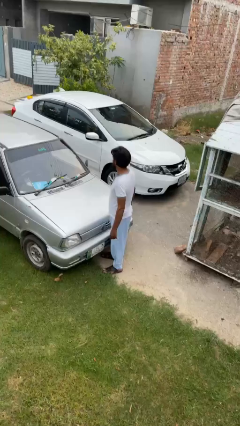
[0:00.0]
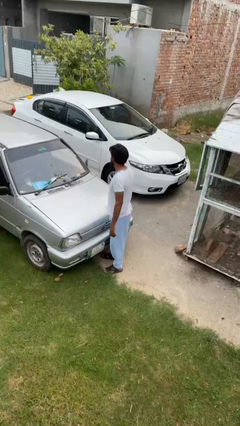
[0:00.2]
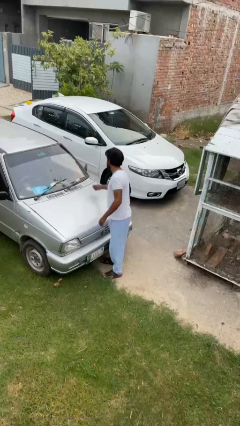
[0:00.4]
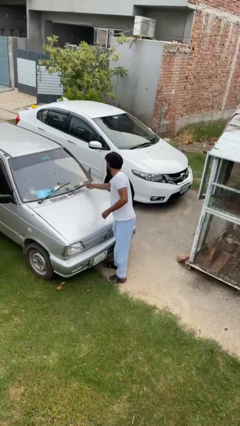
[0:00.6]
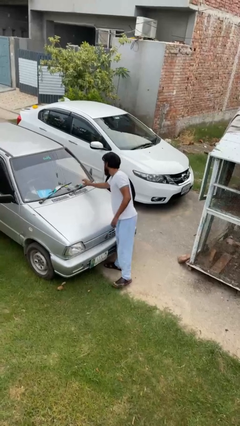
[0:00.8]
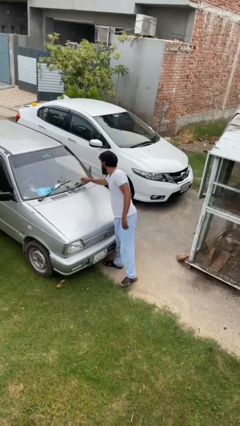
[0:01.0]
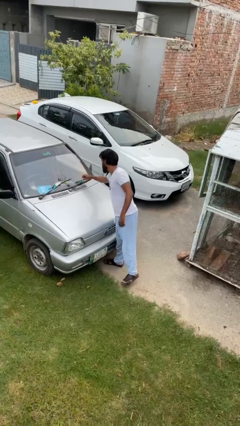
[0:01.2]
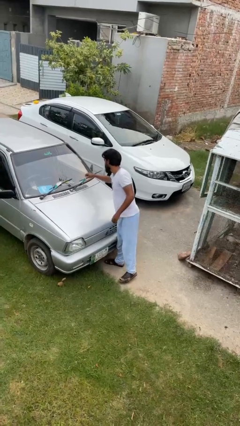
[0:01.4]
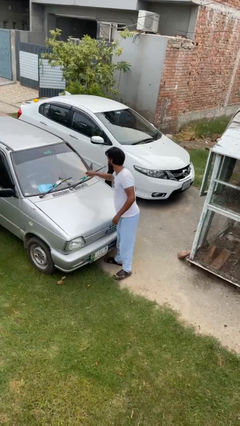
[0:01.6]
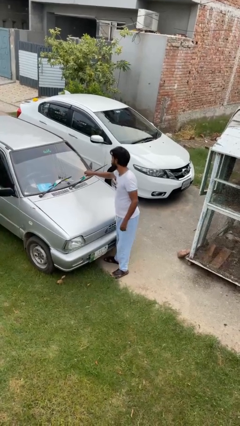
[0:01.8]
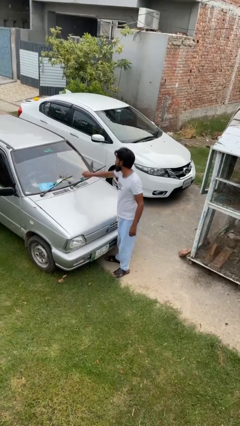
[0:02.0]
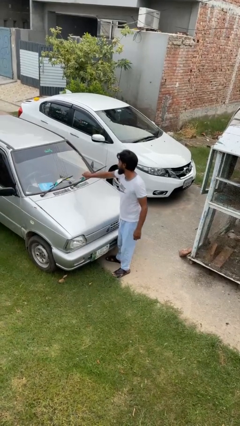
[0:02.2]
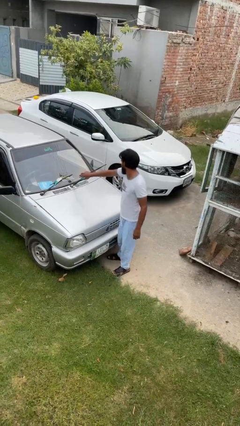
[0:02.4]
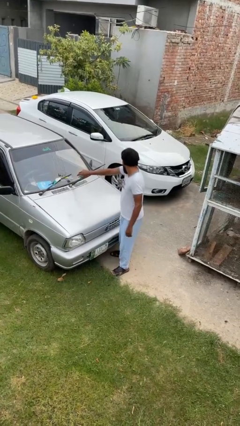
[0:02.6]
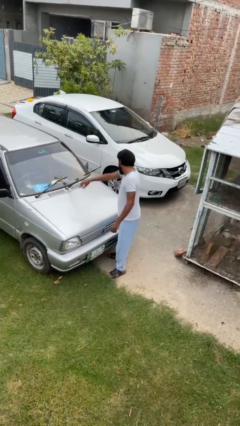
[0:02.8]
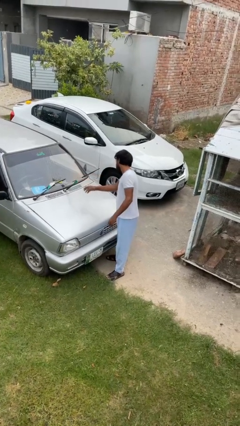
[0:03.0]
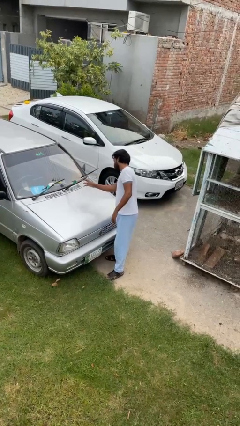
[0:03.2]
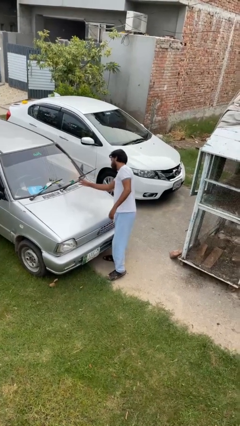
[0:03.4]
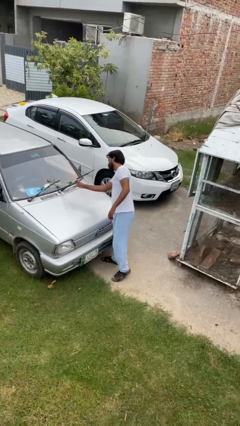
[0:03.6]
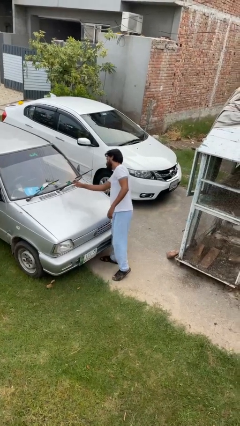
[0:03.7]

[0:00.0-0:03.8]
person flips up car wipers

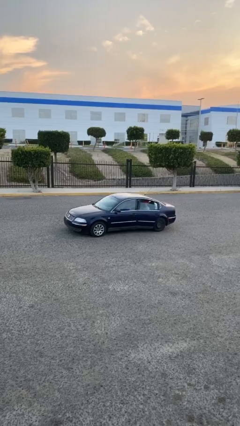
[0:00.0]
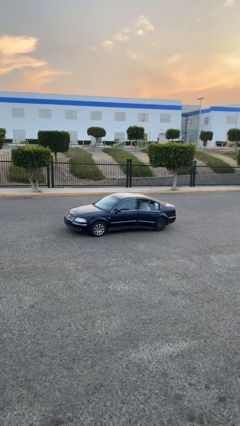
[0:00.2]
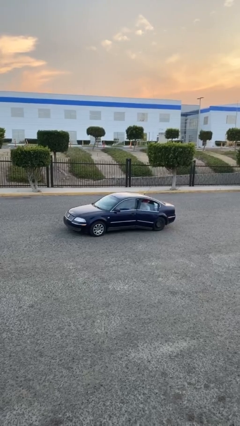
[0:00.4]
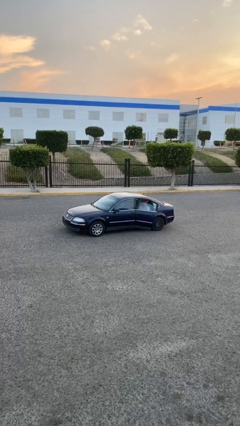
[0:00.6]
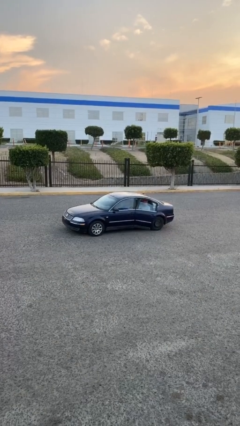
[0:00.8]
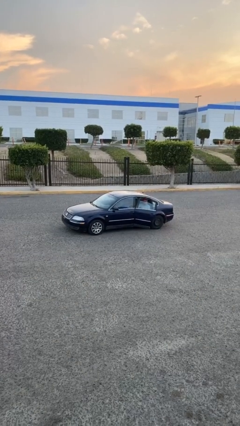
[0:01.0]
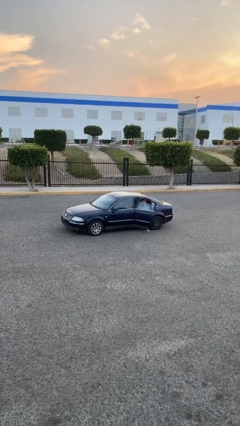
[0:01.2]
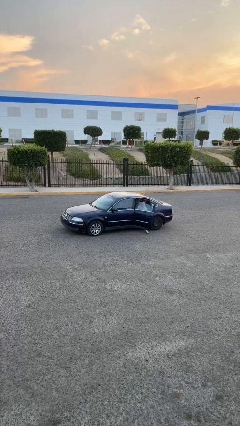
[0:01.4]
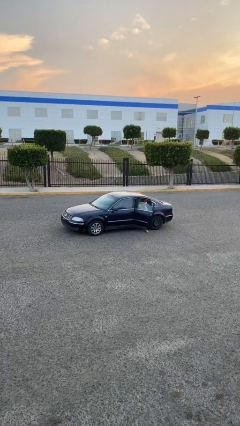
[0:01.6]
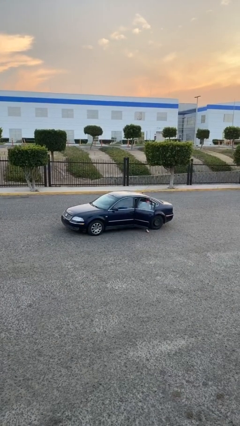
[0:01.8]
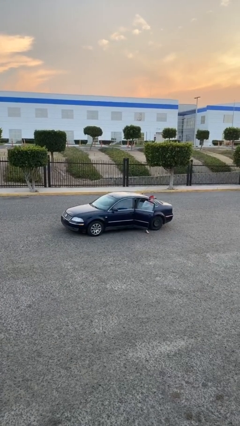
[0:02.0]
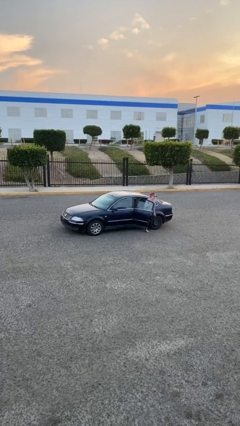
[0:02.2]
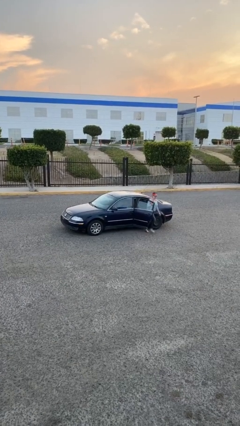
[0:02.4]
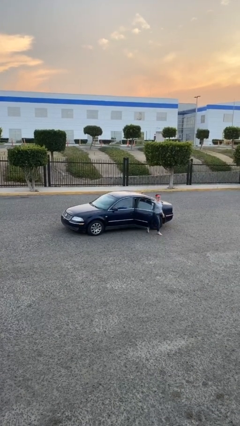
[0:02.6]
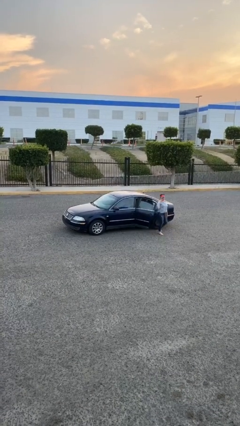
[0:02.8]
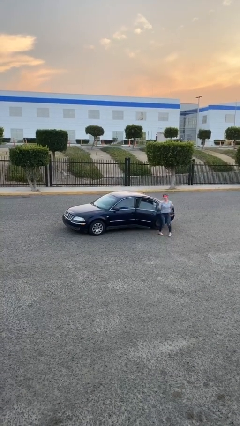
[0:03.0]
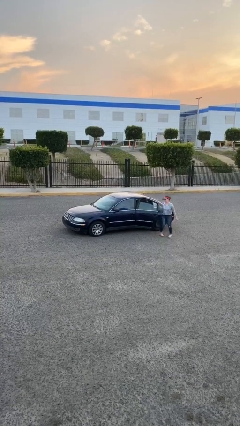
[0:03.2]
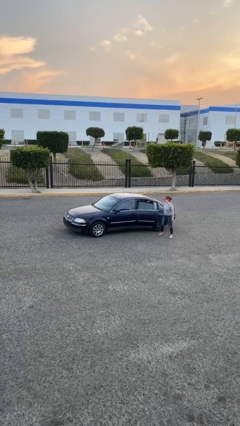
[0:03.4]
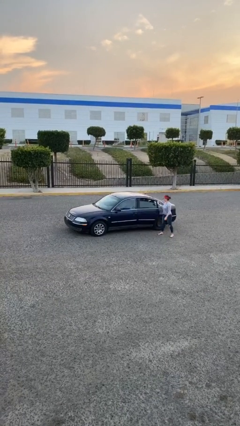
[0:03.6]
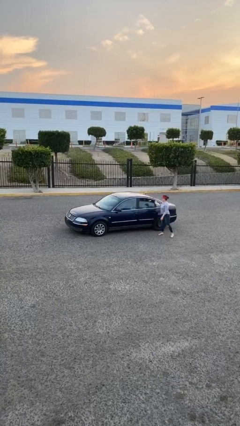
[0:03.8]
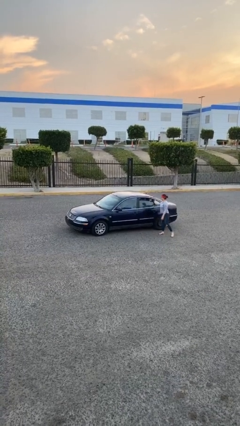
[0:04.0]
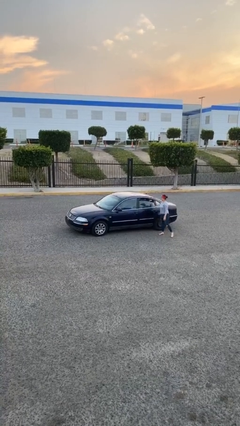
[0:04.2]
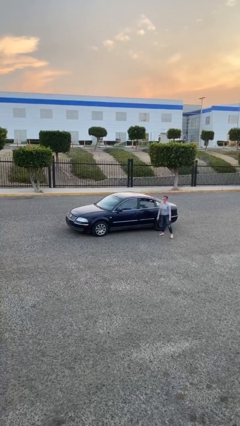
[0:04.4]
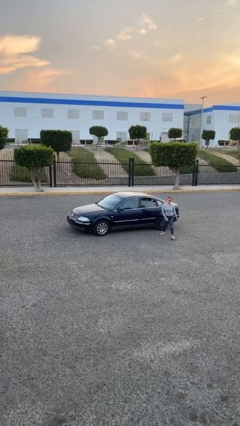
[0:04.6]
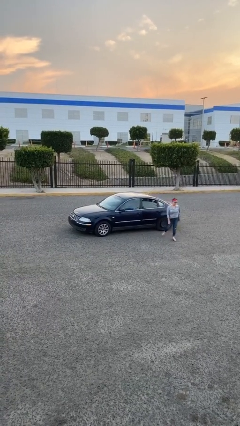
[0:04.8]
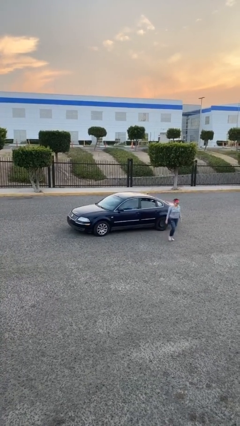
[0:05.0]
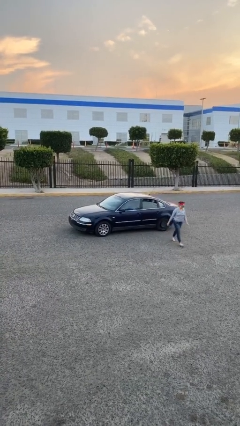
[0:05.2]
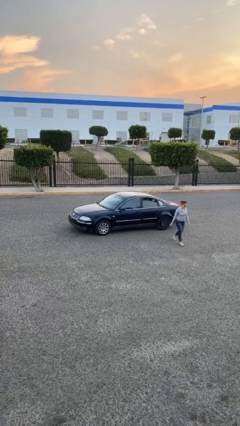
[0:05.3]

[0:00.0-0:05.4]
car drops off person

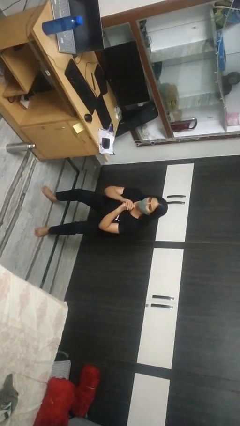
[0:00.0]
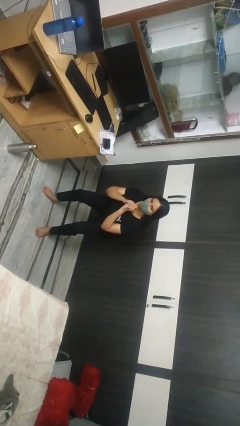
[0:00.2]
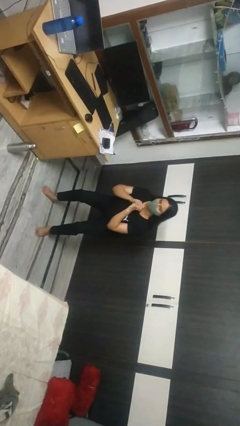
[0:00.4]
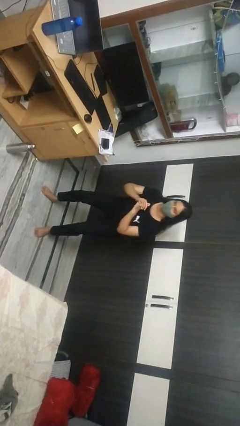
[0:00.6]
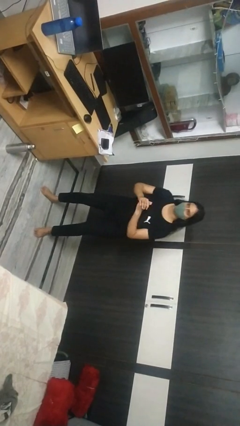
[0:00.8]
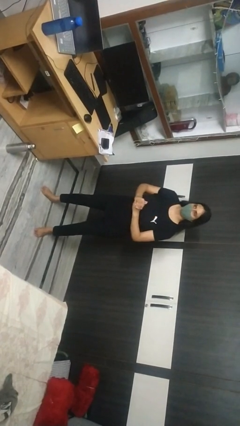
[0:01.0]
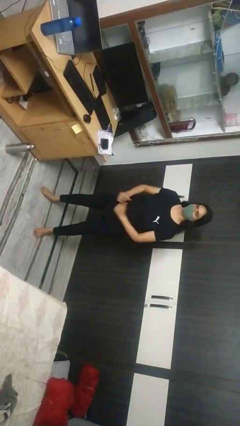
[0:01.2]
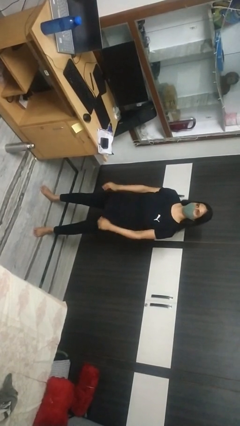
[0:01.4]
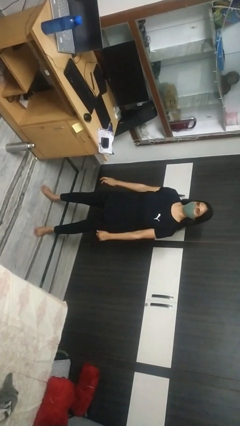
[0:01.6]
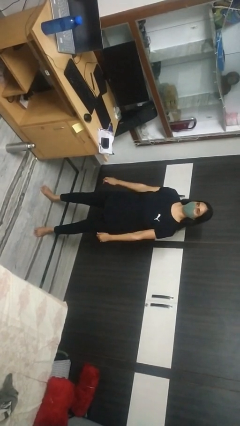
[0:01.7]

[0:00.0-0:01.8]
person stands up

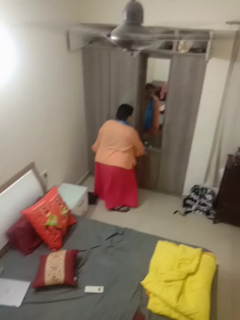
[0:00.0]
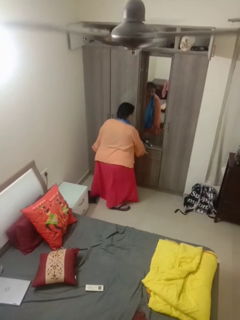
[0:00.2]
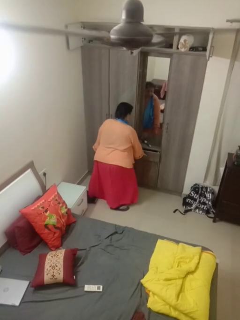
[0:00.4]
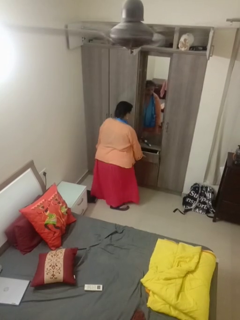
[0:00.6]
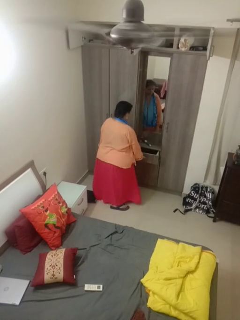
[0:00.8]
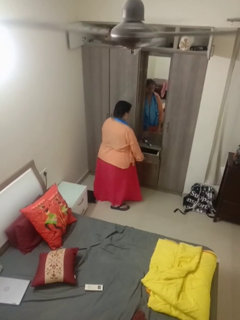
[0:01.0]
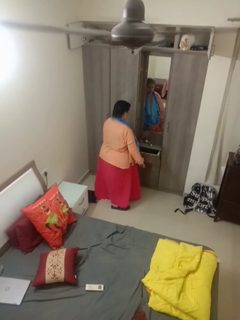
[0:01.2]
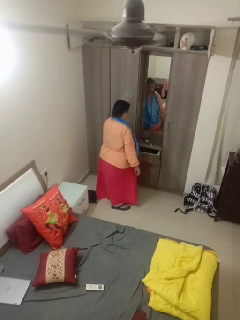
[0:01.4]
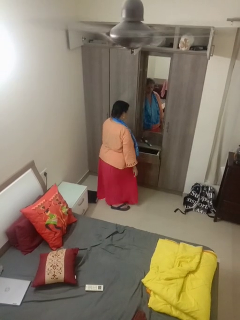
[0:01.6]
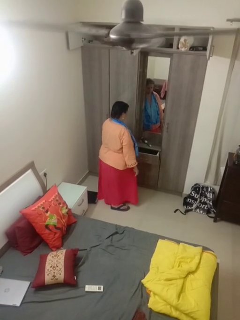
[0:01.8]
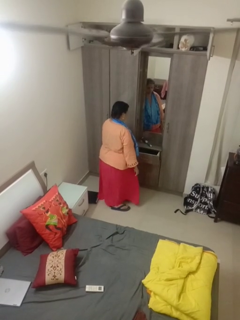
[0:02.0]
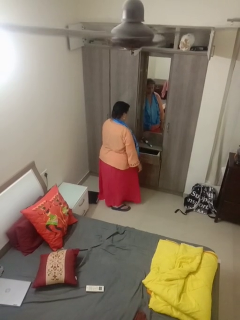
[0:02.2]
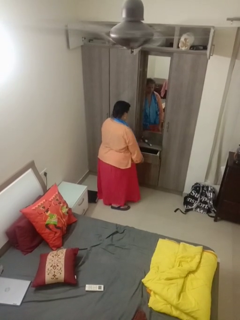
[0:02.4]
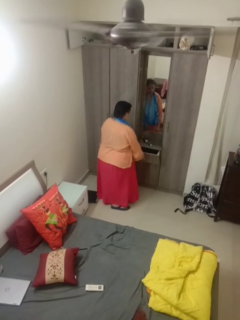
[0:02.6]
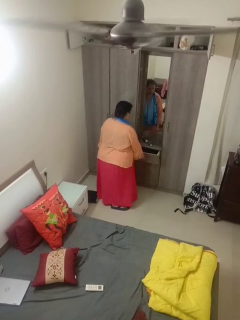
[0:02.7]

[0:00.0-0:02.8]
person opens dresser drawer

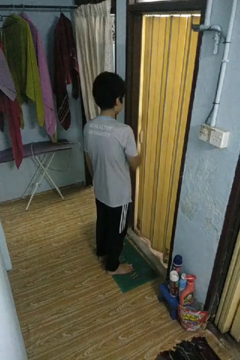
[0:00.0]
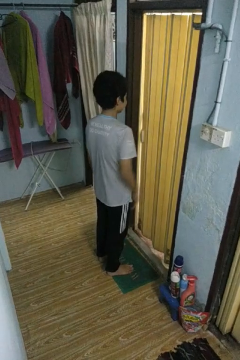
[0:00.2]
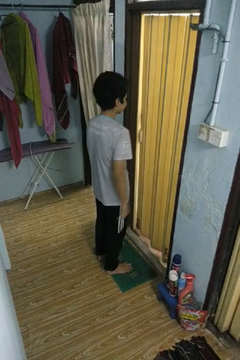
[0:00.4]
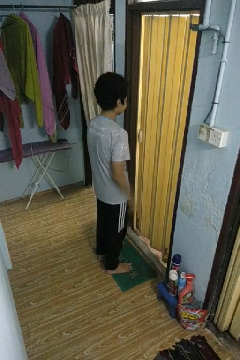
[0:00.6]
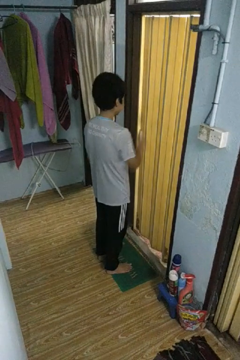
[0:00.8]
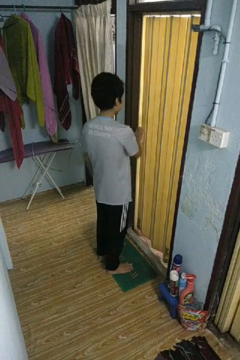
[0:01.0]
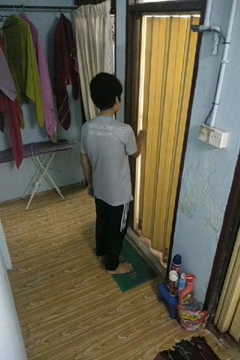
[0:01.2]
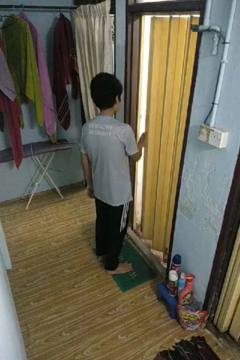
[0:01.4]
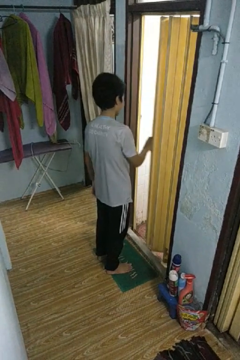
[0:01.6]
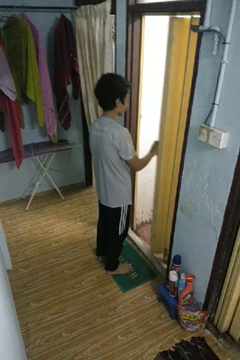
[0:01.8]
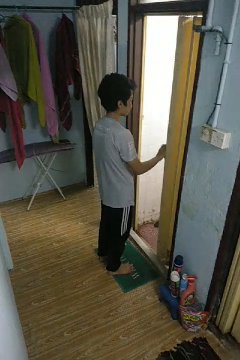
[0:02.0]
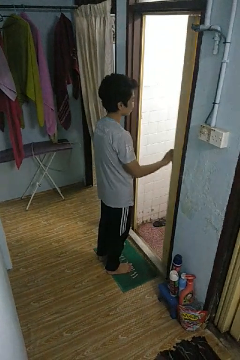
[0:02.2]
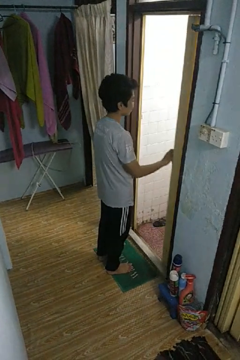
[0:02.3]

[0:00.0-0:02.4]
person opens sliding door

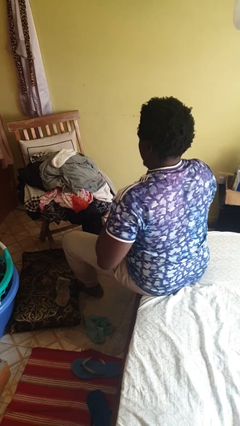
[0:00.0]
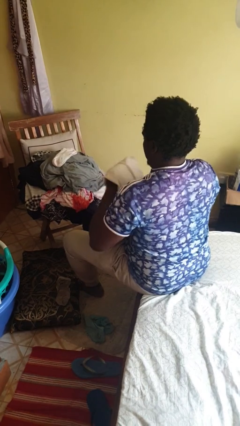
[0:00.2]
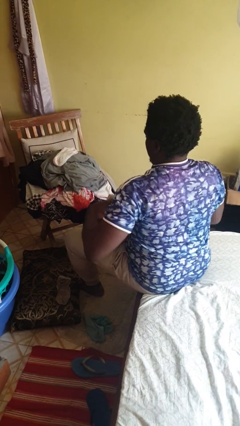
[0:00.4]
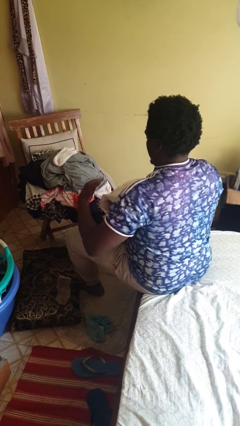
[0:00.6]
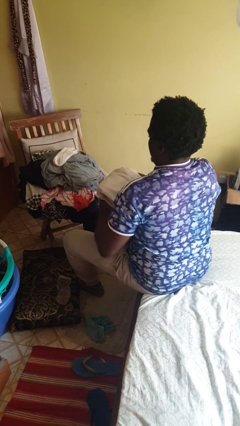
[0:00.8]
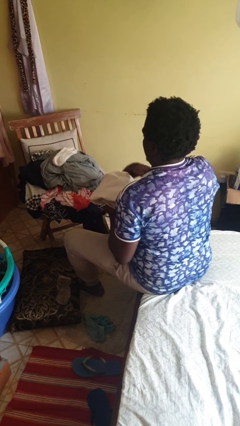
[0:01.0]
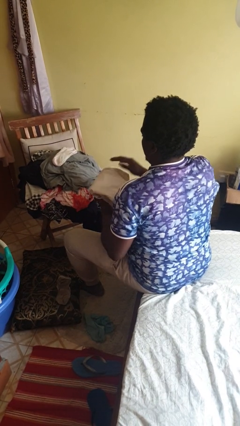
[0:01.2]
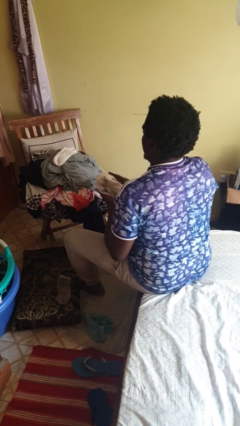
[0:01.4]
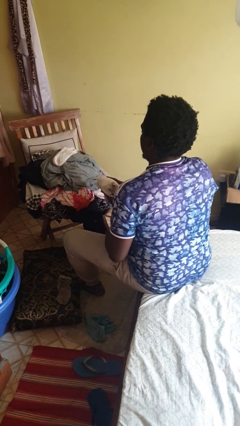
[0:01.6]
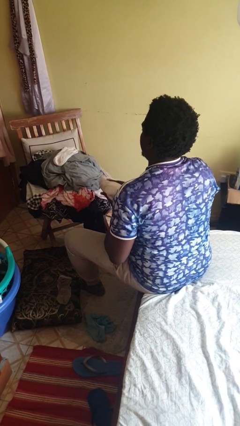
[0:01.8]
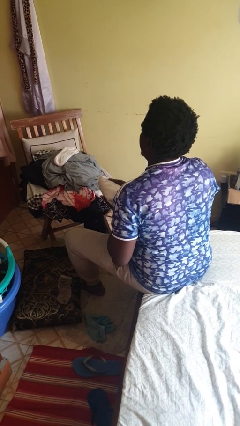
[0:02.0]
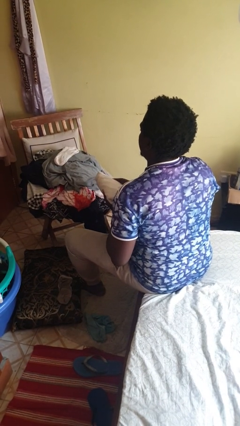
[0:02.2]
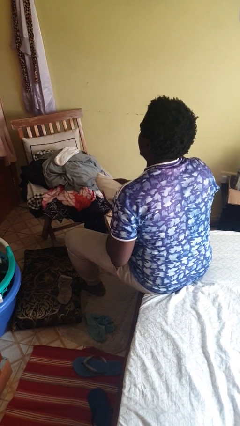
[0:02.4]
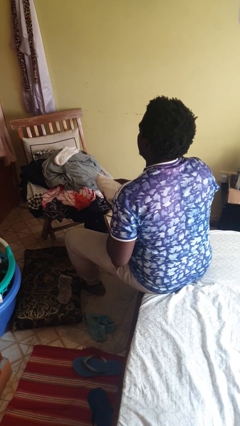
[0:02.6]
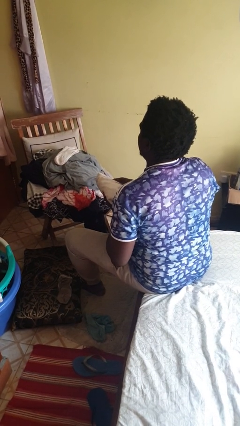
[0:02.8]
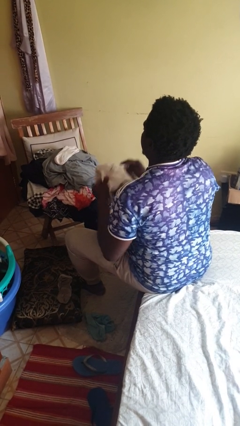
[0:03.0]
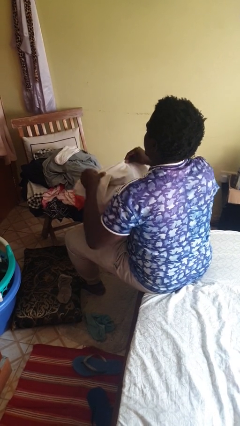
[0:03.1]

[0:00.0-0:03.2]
person folds shirt
